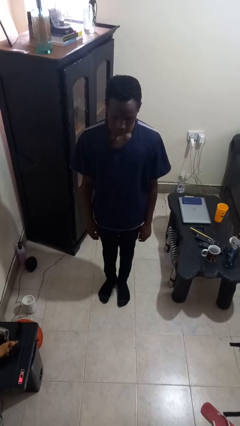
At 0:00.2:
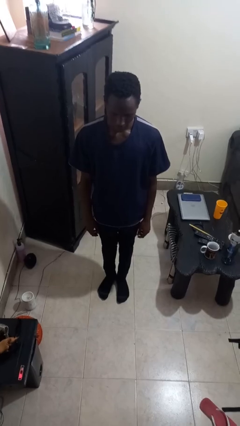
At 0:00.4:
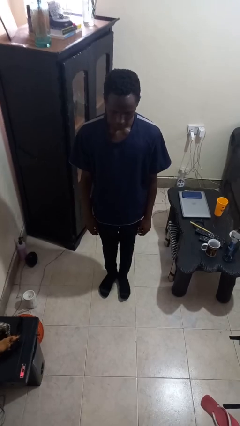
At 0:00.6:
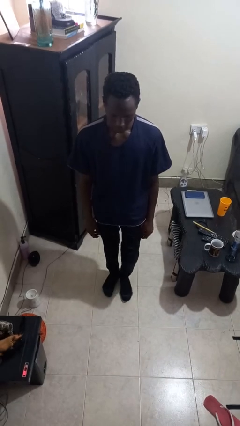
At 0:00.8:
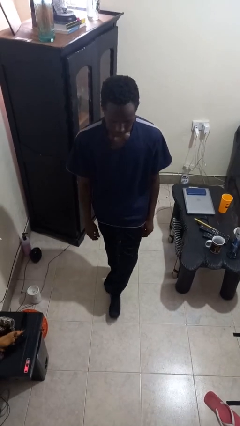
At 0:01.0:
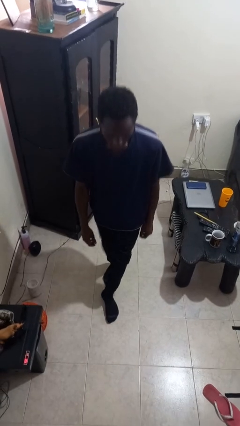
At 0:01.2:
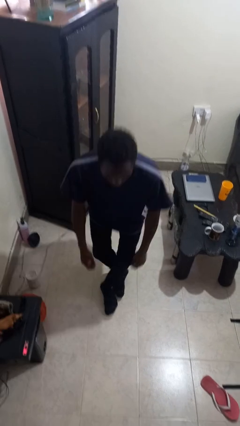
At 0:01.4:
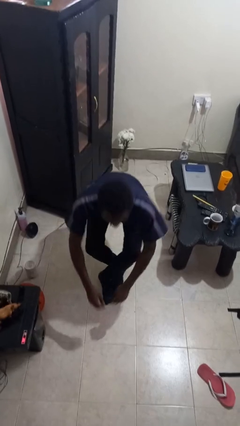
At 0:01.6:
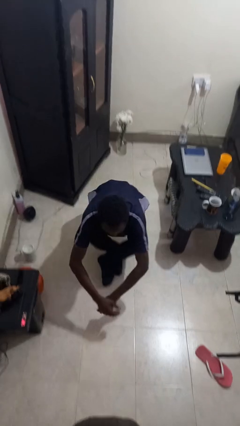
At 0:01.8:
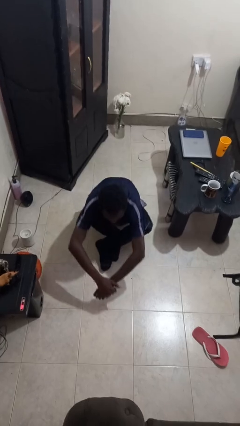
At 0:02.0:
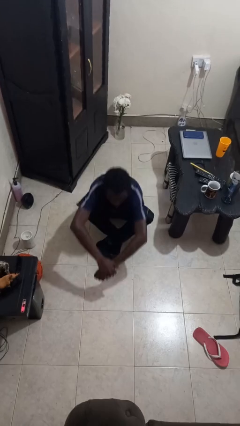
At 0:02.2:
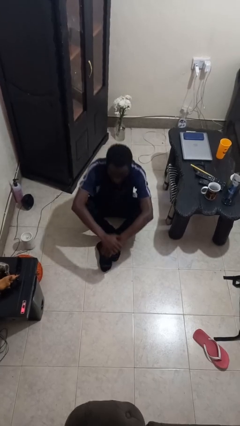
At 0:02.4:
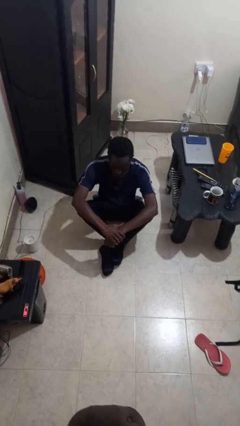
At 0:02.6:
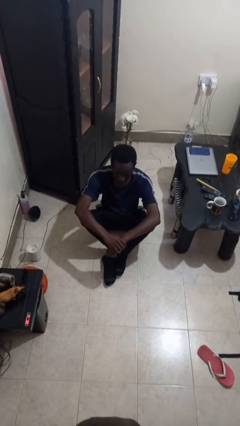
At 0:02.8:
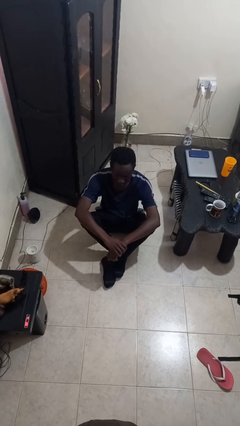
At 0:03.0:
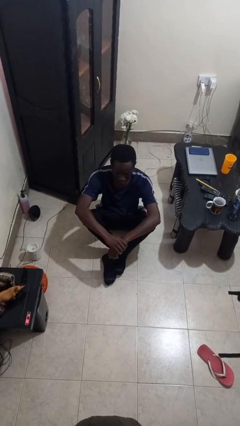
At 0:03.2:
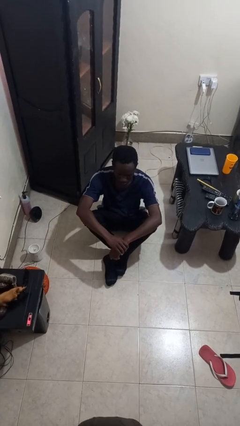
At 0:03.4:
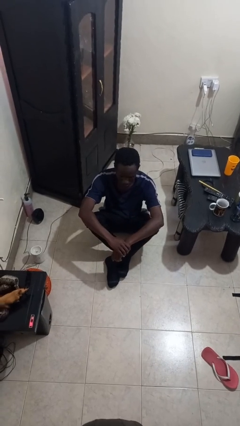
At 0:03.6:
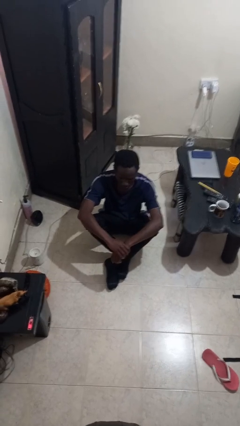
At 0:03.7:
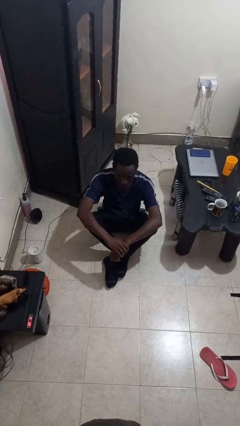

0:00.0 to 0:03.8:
person sits crisscross

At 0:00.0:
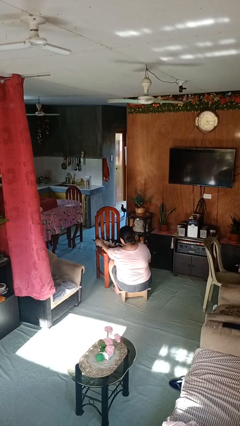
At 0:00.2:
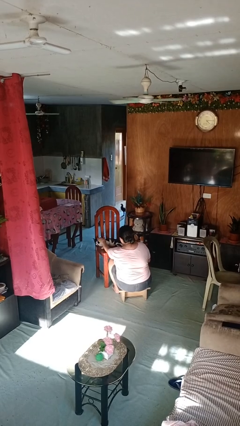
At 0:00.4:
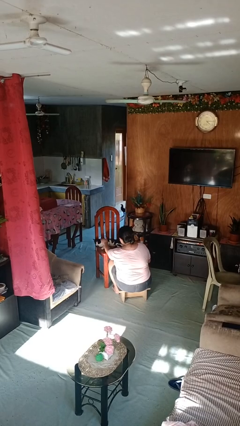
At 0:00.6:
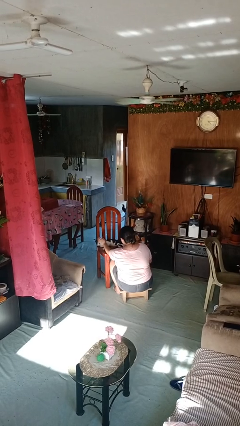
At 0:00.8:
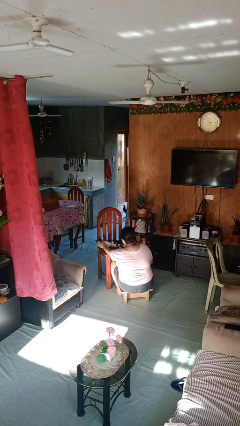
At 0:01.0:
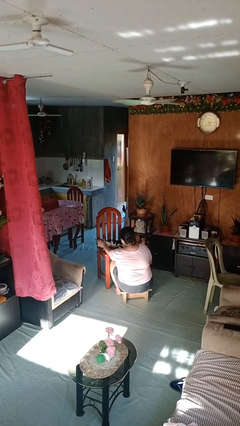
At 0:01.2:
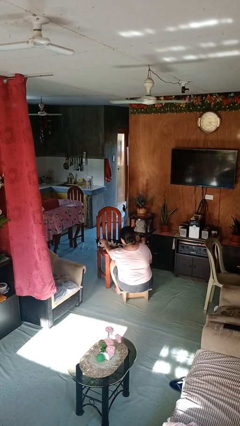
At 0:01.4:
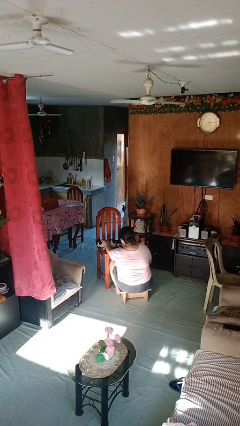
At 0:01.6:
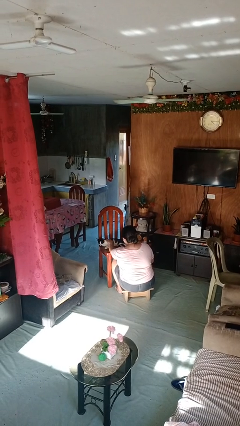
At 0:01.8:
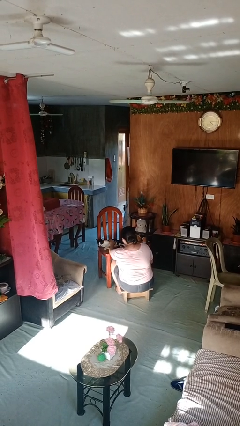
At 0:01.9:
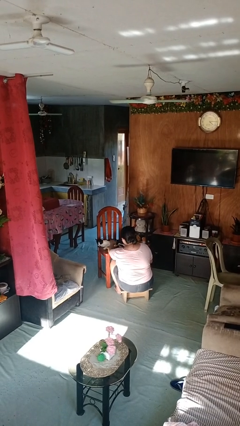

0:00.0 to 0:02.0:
person pets cat

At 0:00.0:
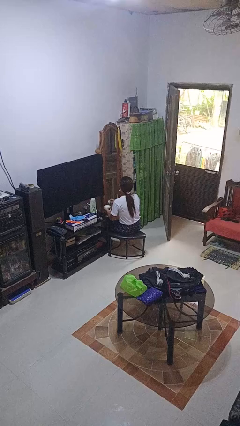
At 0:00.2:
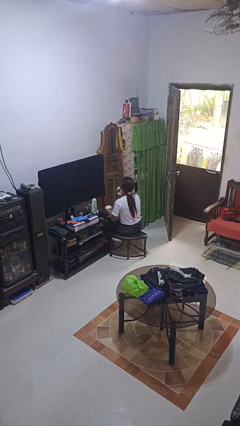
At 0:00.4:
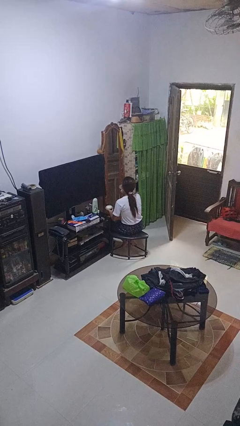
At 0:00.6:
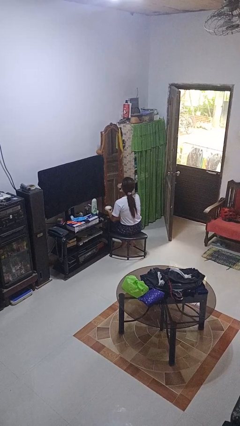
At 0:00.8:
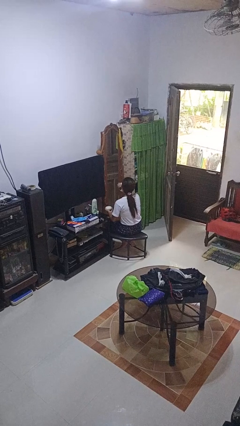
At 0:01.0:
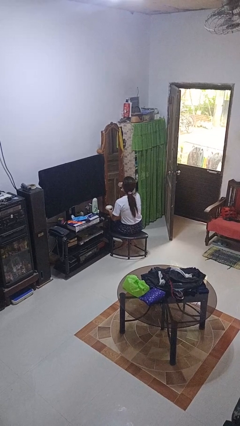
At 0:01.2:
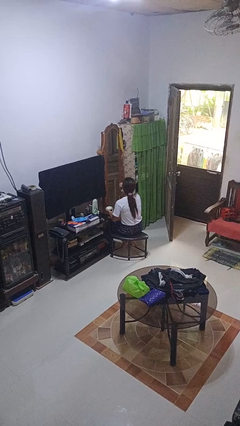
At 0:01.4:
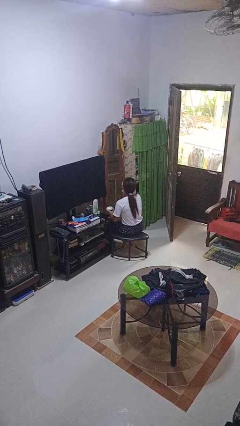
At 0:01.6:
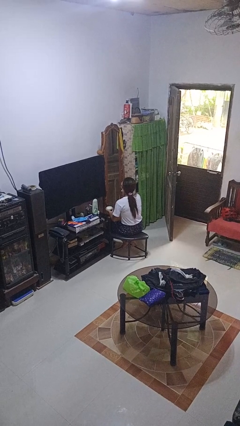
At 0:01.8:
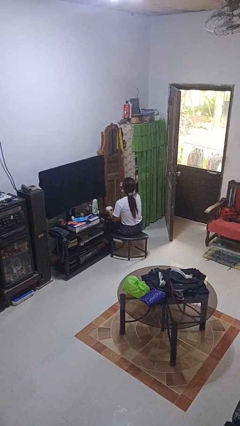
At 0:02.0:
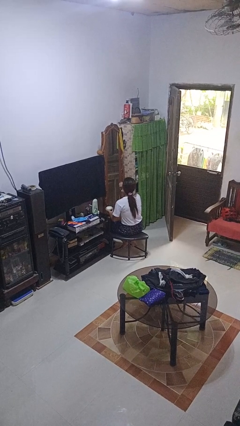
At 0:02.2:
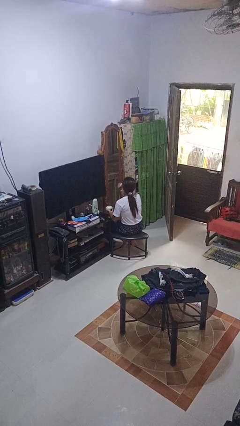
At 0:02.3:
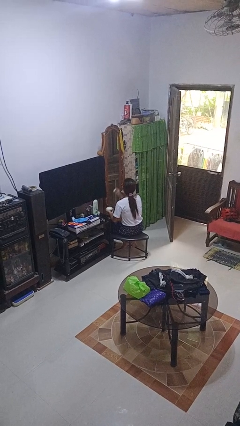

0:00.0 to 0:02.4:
person applies foundation makeup

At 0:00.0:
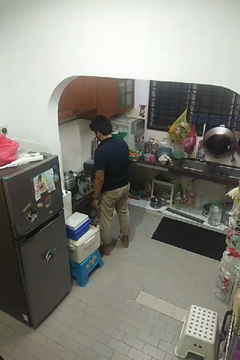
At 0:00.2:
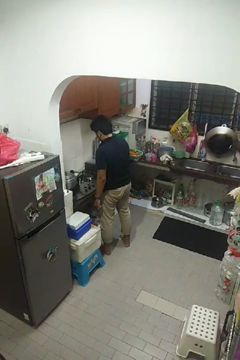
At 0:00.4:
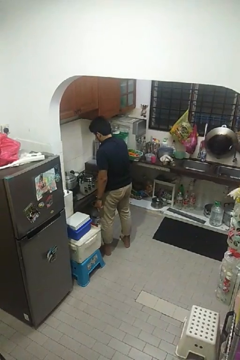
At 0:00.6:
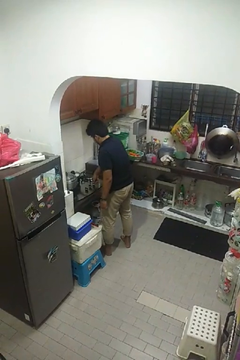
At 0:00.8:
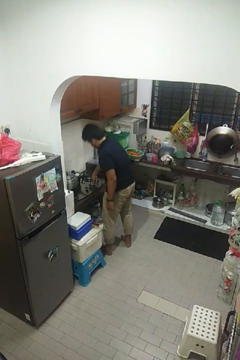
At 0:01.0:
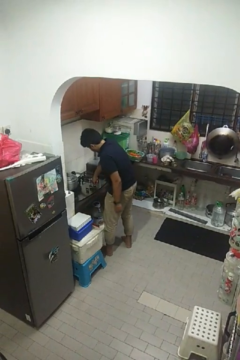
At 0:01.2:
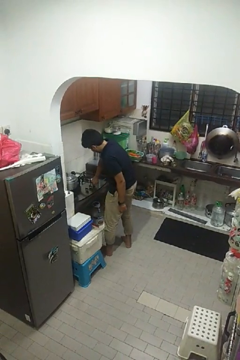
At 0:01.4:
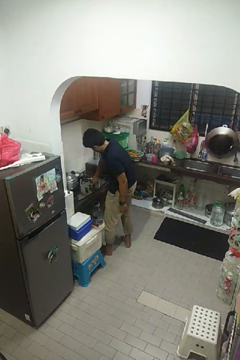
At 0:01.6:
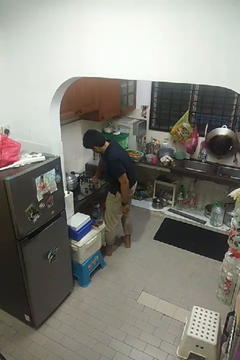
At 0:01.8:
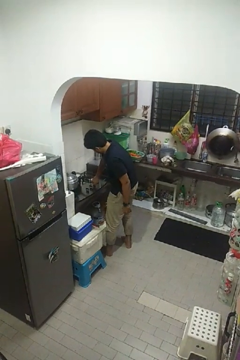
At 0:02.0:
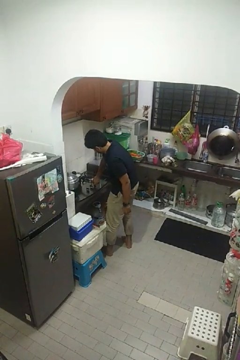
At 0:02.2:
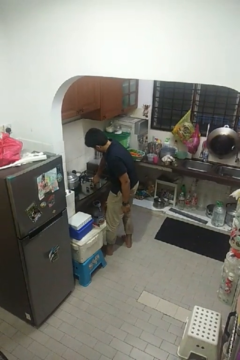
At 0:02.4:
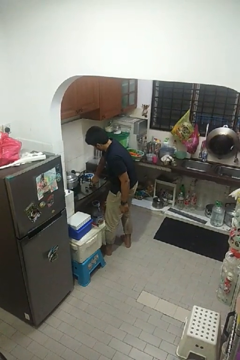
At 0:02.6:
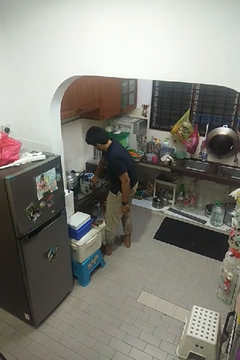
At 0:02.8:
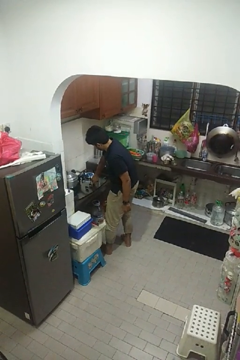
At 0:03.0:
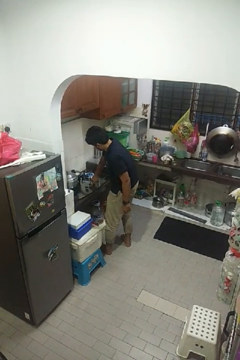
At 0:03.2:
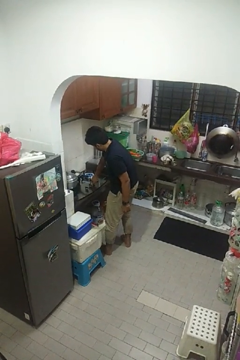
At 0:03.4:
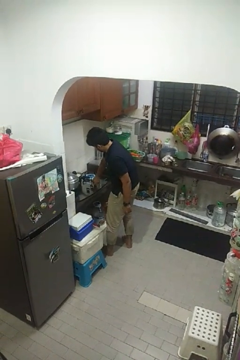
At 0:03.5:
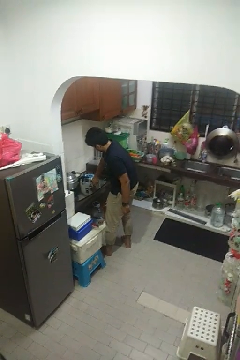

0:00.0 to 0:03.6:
person turns on stovetop

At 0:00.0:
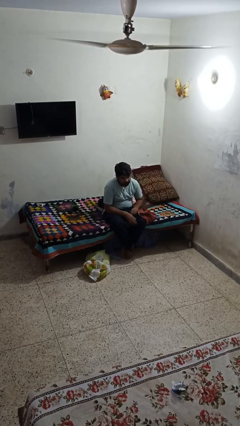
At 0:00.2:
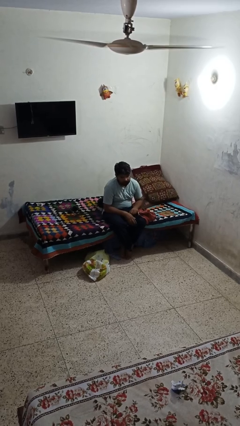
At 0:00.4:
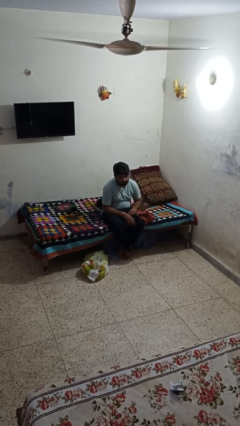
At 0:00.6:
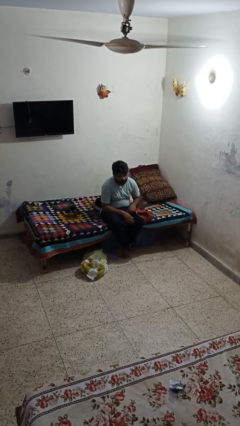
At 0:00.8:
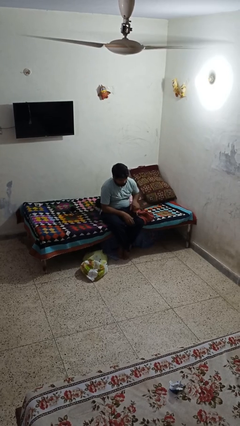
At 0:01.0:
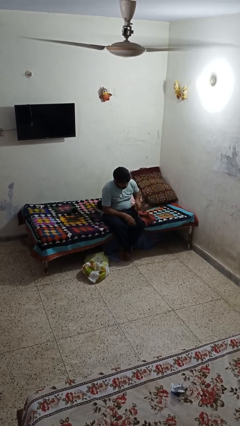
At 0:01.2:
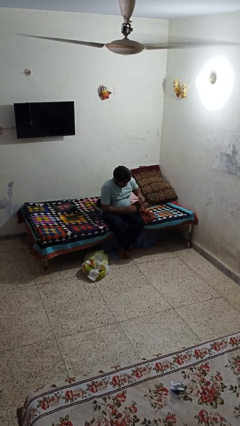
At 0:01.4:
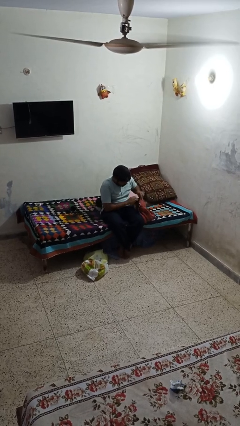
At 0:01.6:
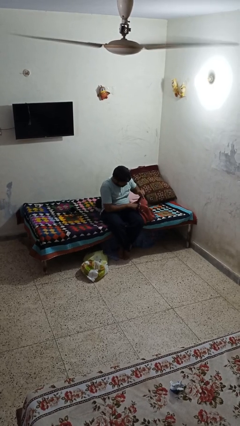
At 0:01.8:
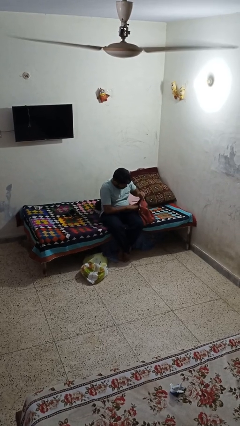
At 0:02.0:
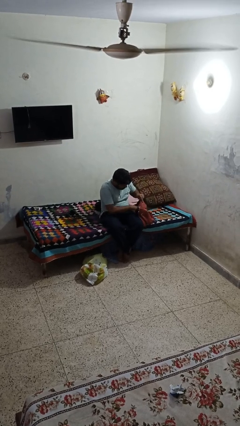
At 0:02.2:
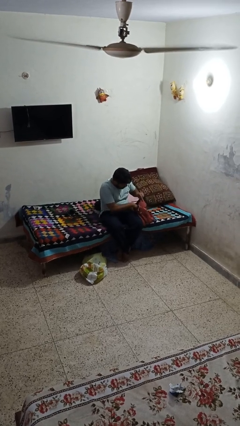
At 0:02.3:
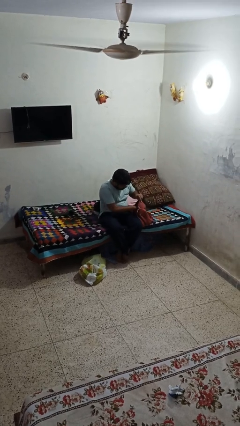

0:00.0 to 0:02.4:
person searches in purse

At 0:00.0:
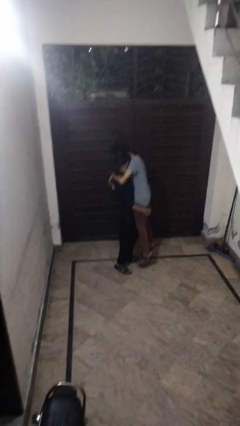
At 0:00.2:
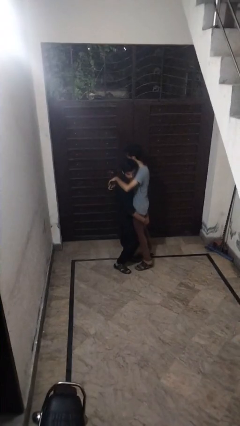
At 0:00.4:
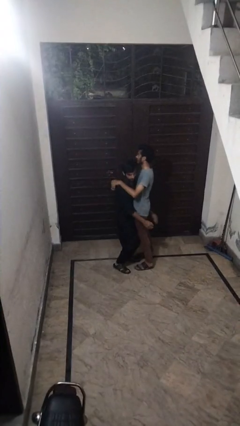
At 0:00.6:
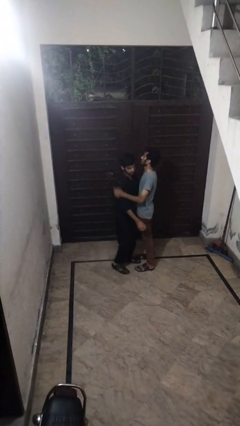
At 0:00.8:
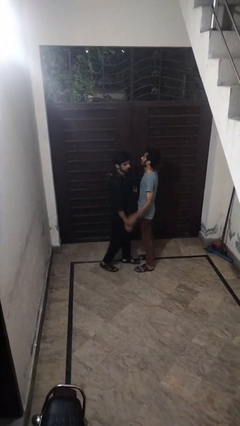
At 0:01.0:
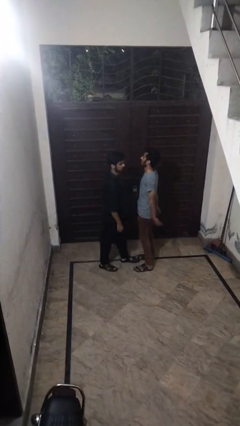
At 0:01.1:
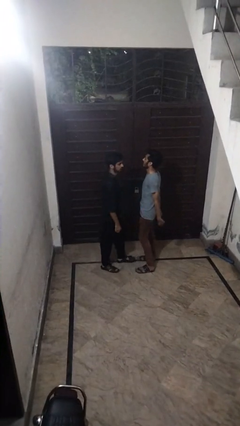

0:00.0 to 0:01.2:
person puts down person

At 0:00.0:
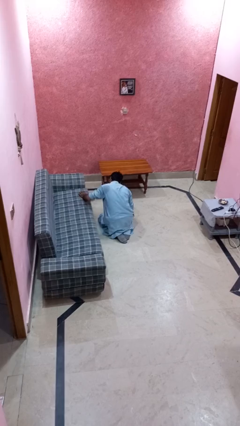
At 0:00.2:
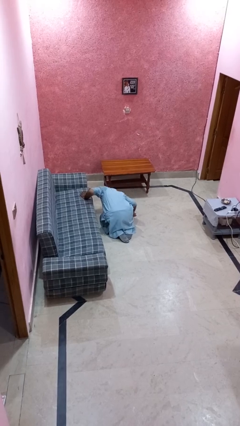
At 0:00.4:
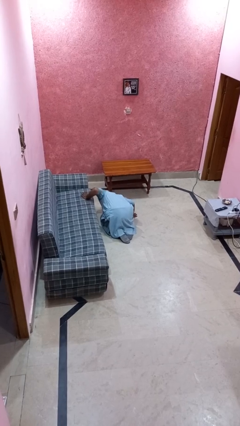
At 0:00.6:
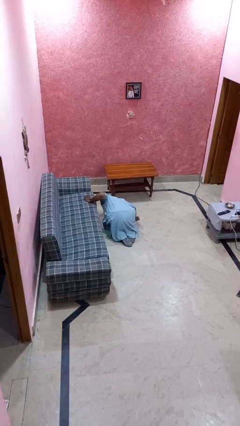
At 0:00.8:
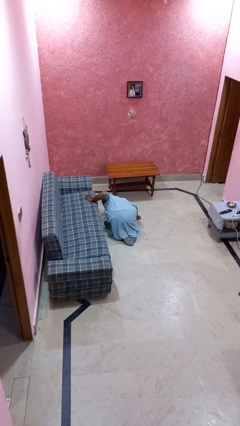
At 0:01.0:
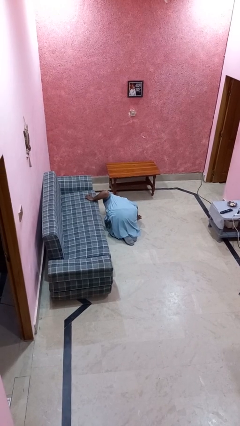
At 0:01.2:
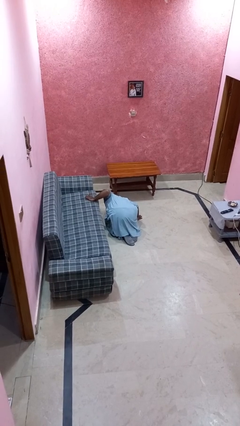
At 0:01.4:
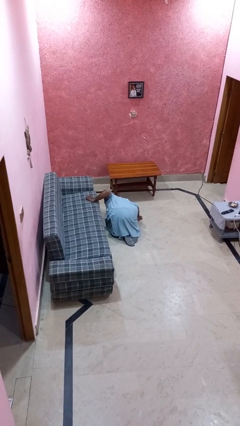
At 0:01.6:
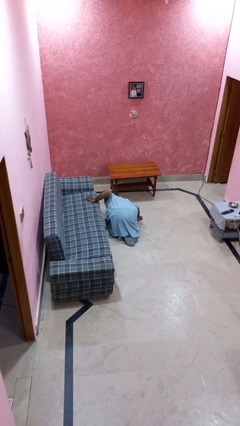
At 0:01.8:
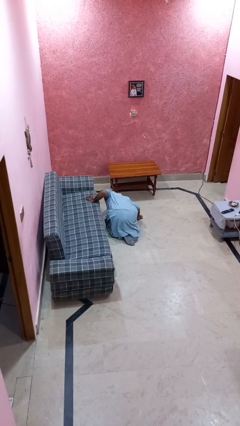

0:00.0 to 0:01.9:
person searches under couch

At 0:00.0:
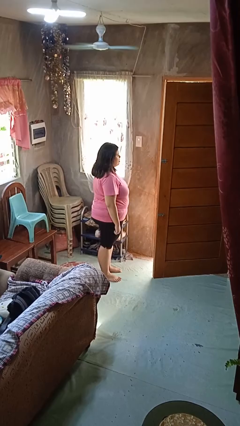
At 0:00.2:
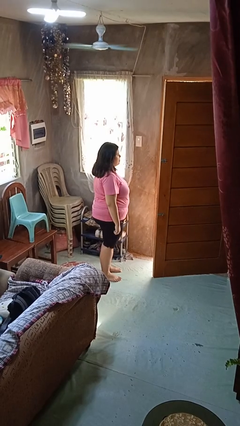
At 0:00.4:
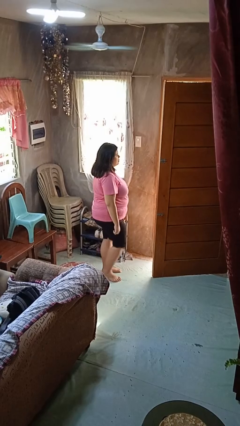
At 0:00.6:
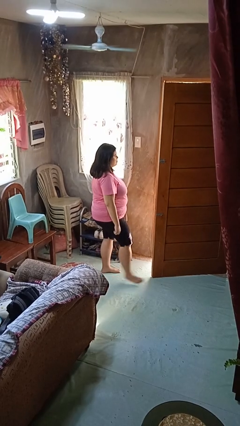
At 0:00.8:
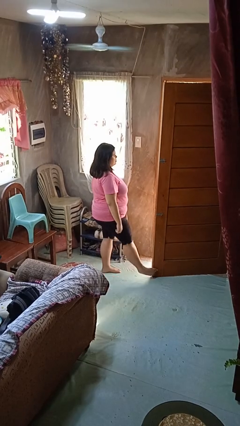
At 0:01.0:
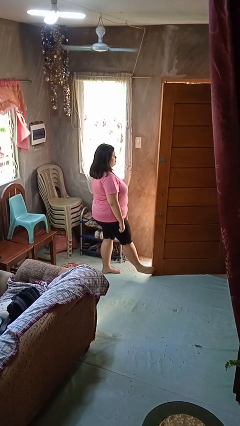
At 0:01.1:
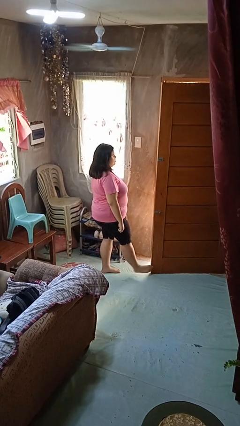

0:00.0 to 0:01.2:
person closes door with foot
